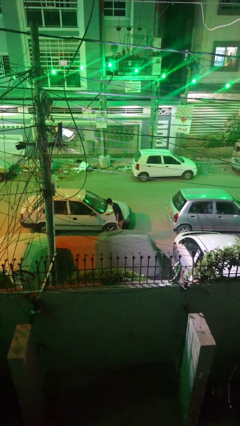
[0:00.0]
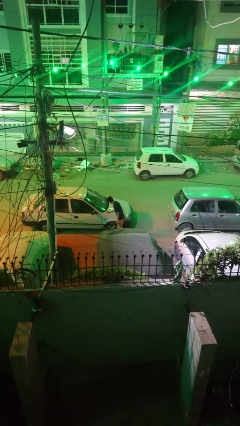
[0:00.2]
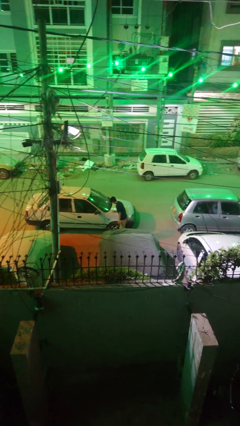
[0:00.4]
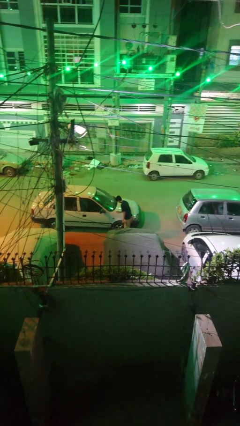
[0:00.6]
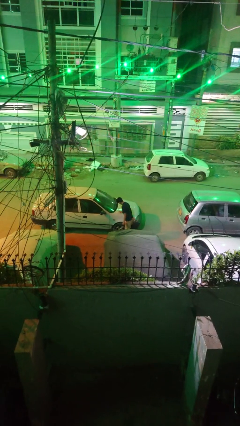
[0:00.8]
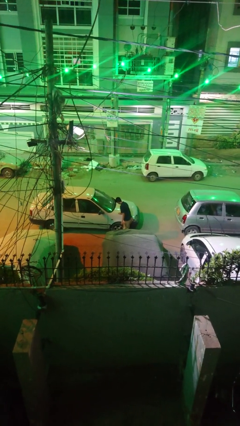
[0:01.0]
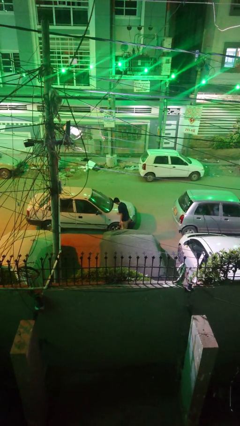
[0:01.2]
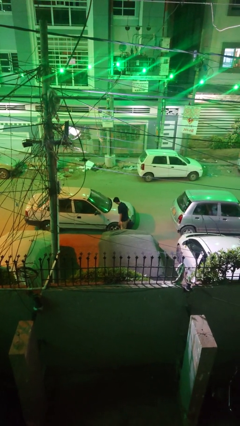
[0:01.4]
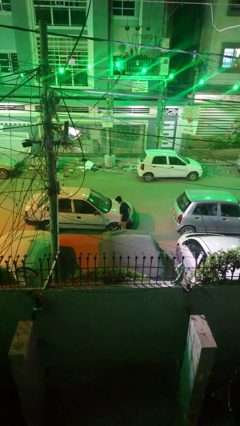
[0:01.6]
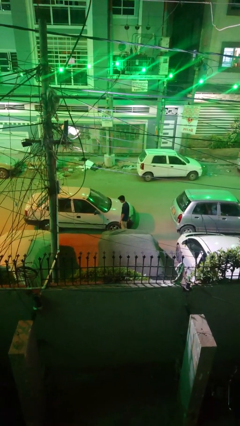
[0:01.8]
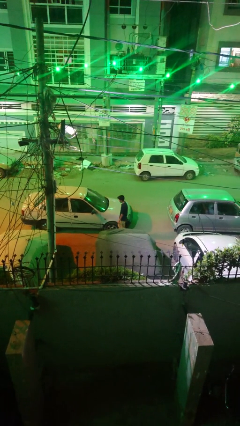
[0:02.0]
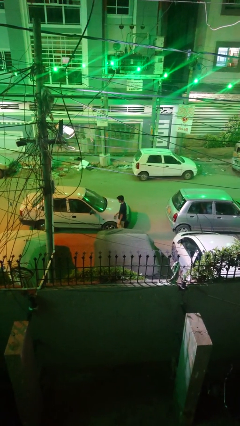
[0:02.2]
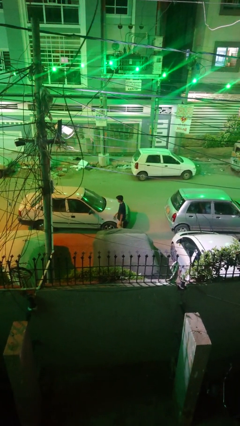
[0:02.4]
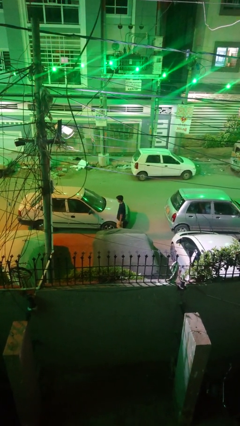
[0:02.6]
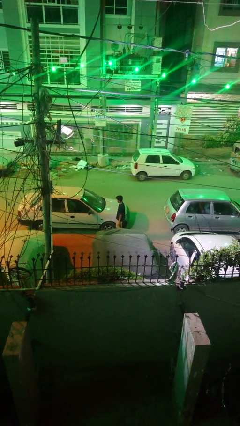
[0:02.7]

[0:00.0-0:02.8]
person polishes car with rag

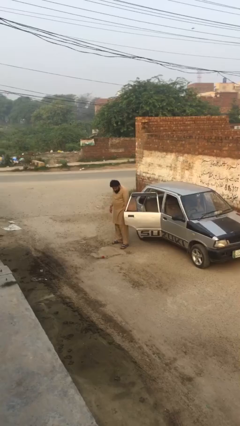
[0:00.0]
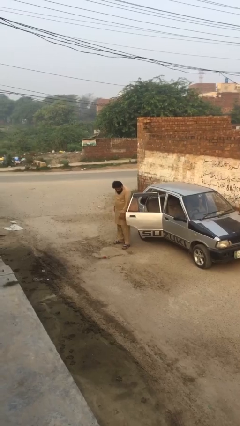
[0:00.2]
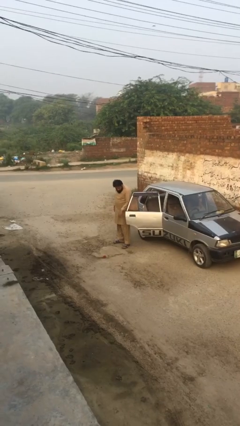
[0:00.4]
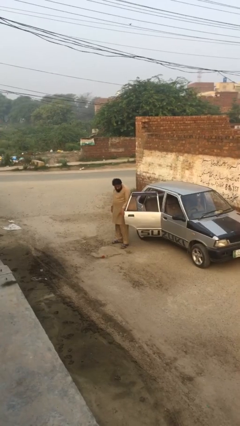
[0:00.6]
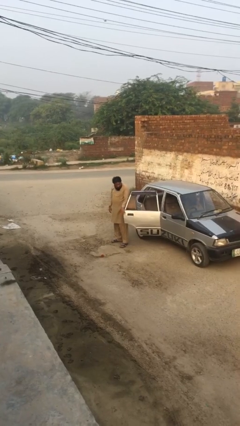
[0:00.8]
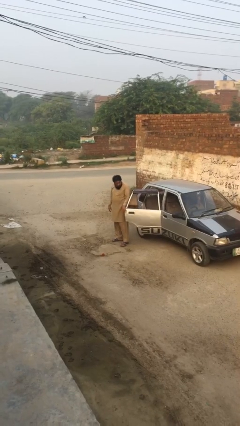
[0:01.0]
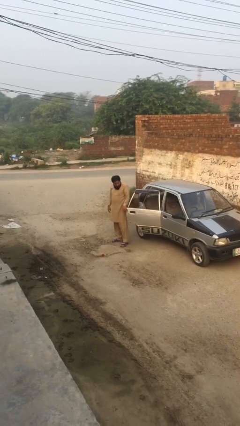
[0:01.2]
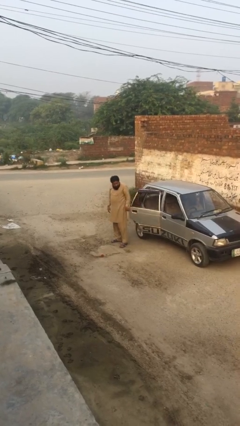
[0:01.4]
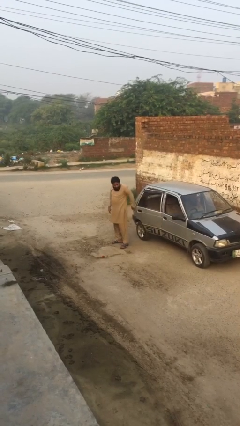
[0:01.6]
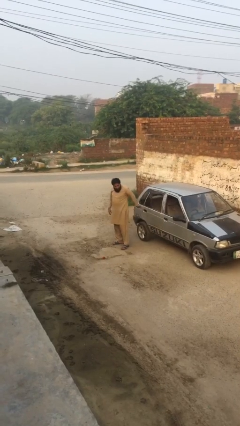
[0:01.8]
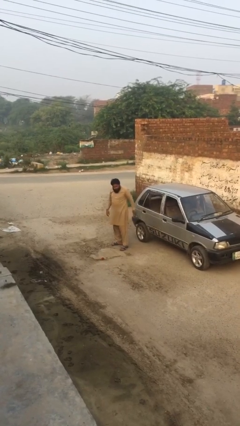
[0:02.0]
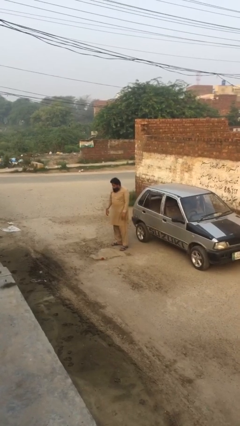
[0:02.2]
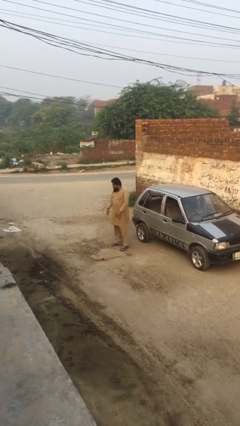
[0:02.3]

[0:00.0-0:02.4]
person closes car door

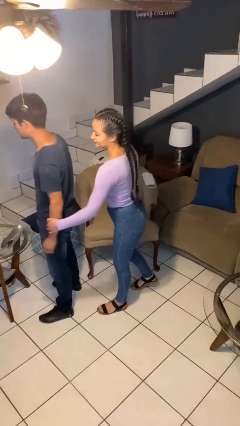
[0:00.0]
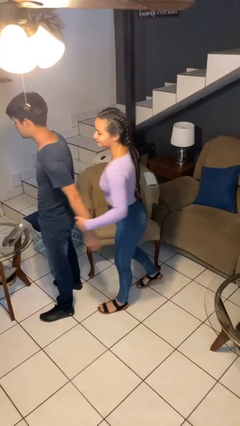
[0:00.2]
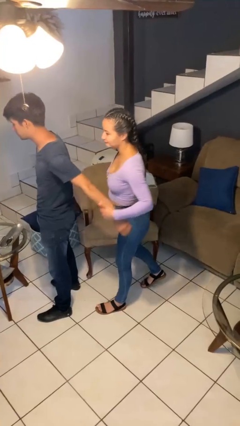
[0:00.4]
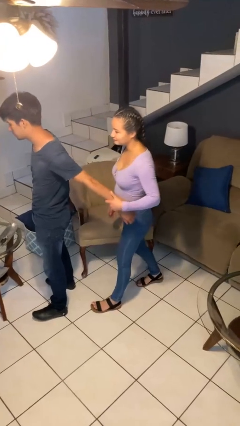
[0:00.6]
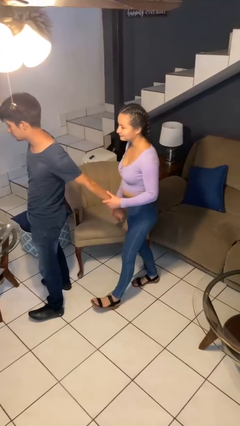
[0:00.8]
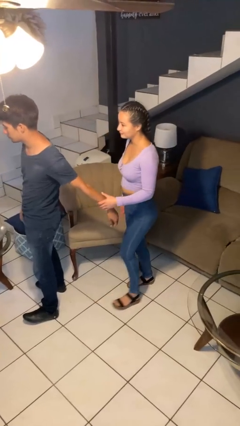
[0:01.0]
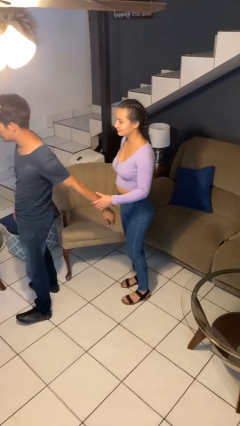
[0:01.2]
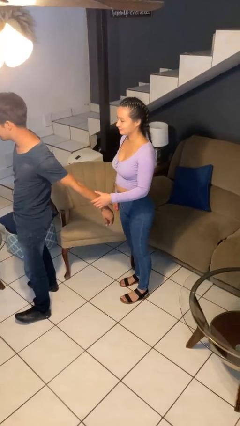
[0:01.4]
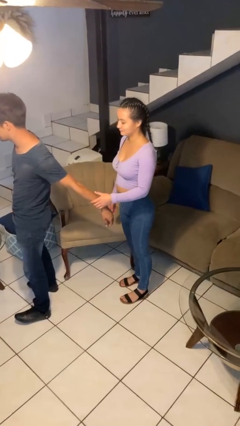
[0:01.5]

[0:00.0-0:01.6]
person grabs person by forearm

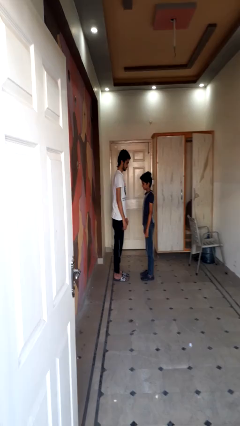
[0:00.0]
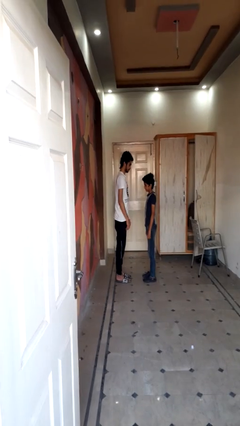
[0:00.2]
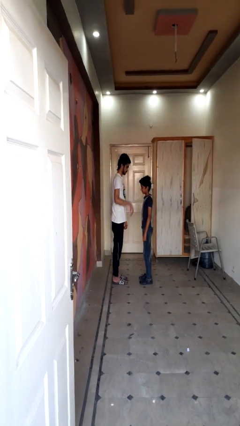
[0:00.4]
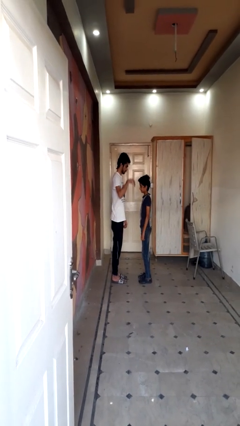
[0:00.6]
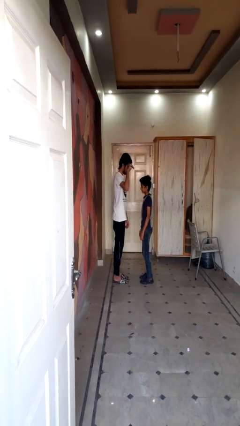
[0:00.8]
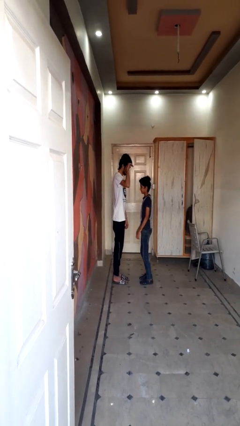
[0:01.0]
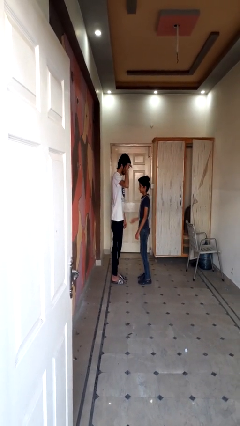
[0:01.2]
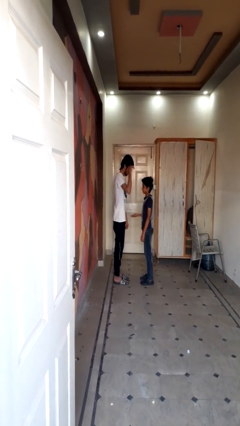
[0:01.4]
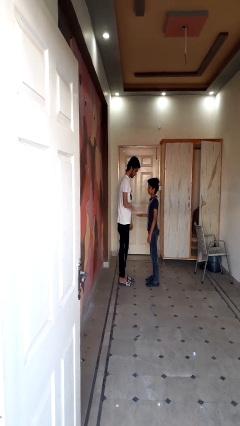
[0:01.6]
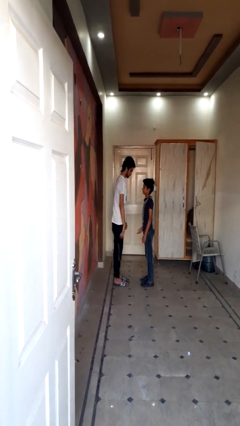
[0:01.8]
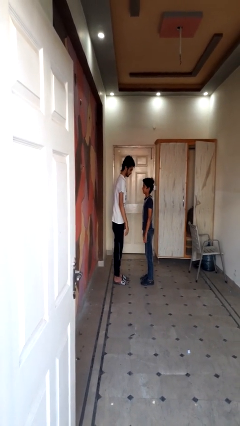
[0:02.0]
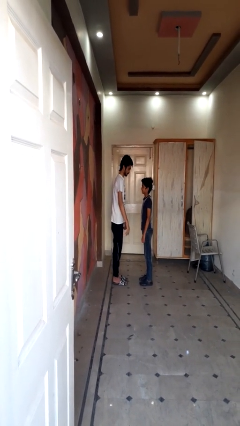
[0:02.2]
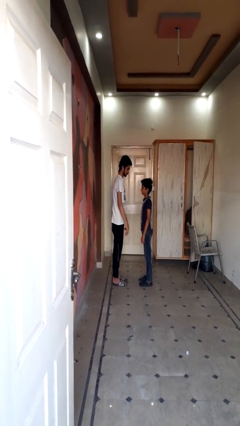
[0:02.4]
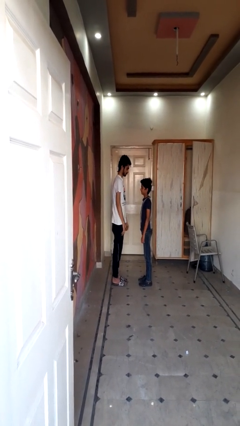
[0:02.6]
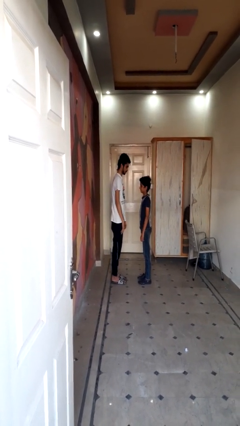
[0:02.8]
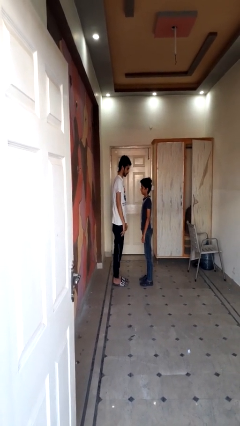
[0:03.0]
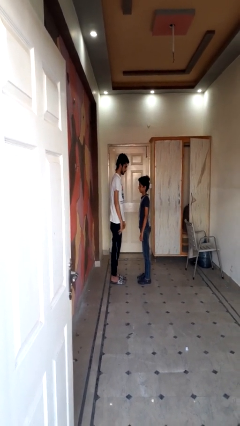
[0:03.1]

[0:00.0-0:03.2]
person highfives hand

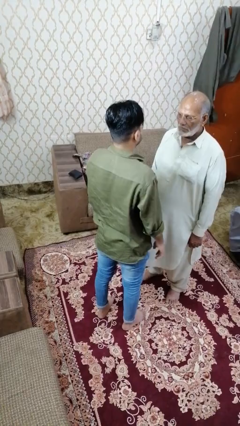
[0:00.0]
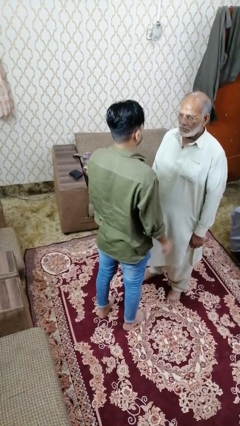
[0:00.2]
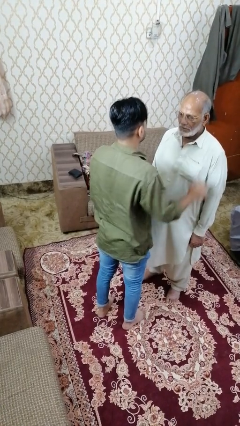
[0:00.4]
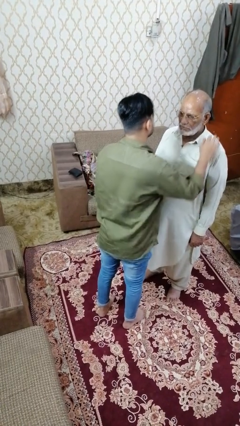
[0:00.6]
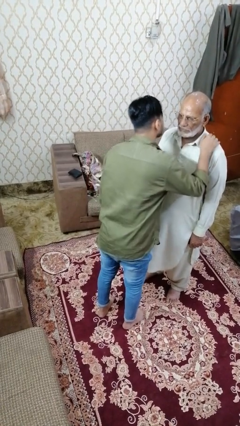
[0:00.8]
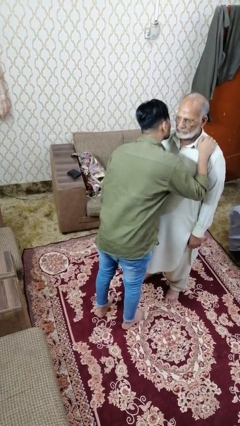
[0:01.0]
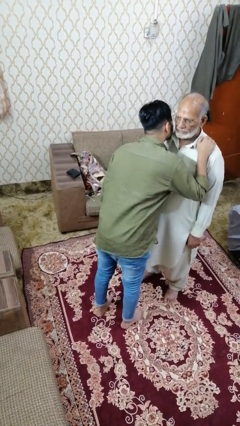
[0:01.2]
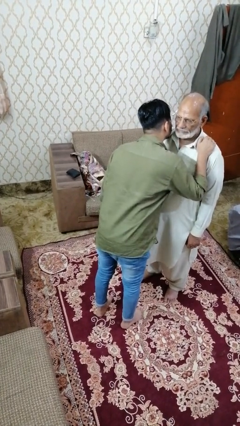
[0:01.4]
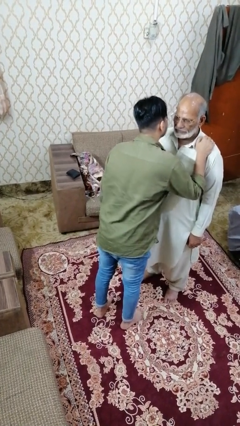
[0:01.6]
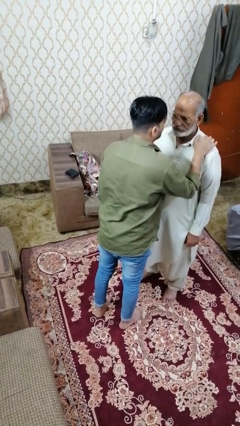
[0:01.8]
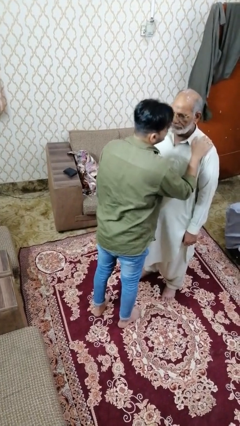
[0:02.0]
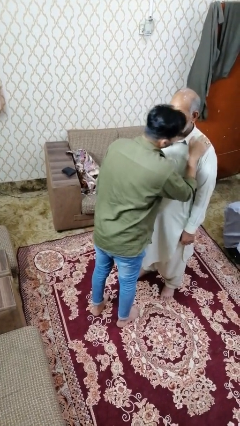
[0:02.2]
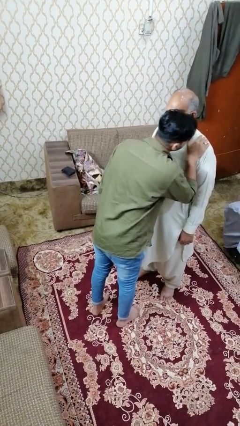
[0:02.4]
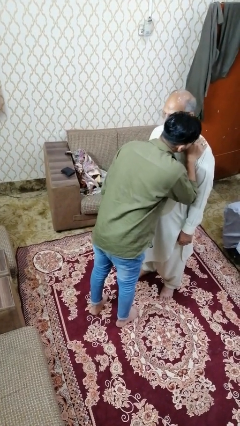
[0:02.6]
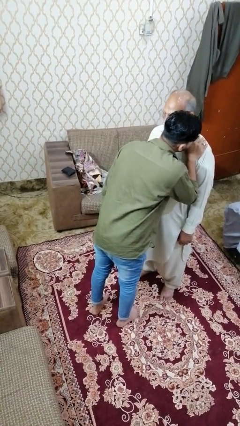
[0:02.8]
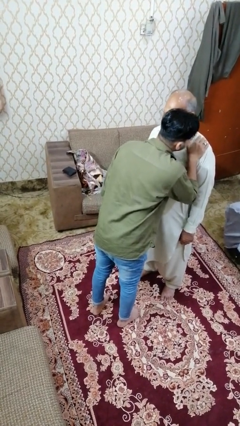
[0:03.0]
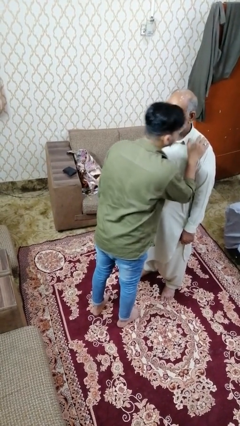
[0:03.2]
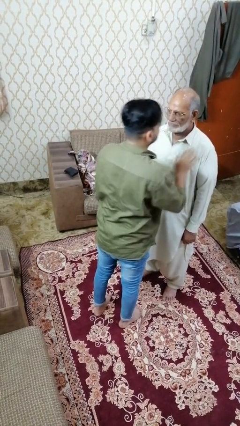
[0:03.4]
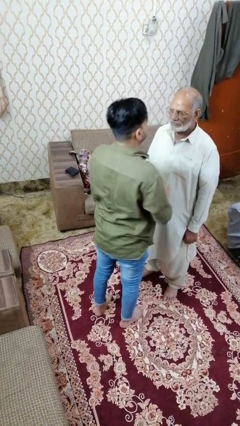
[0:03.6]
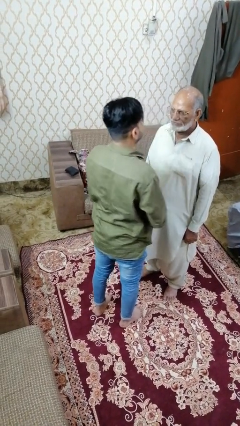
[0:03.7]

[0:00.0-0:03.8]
person kisses cheek of person

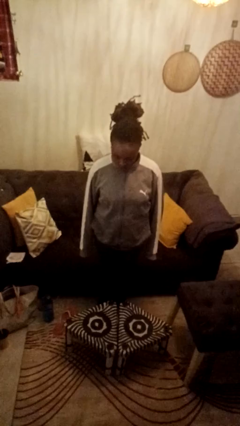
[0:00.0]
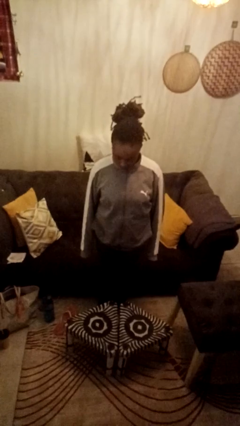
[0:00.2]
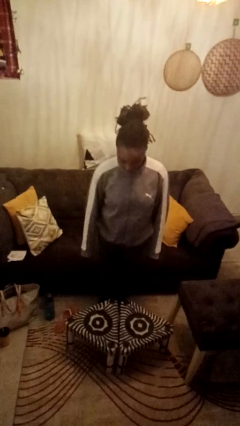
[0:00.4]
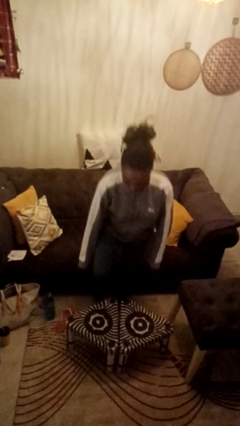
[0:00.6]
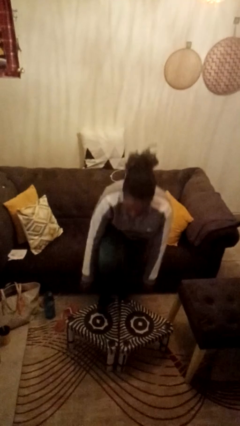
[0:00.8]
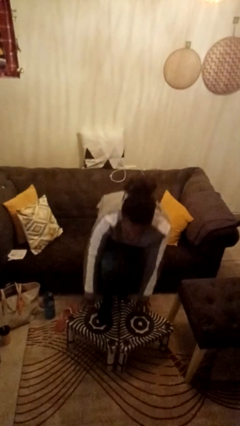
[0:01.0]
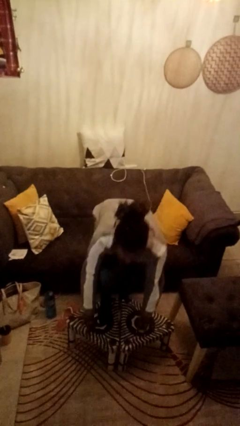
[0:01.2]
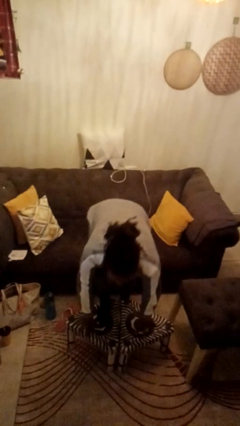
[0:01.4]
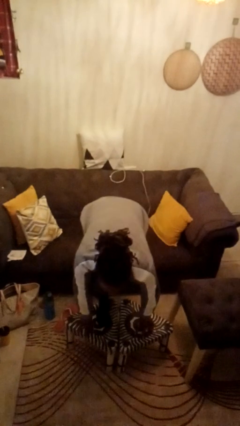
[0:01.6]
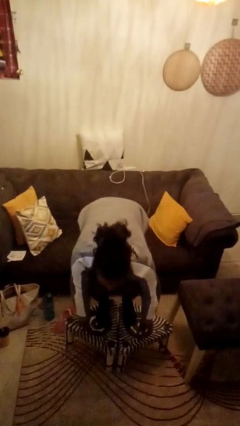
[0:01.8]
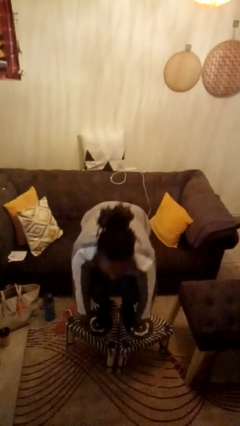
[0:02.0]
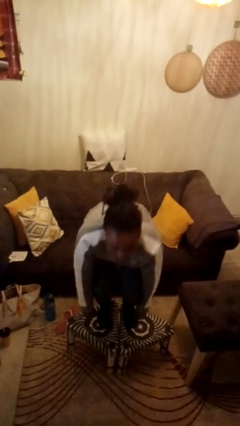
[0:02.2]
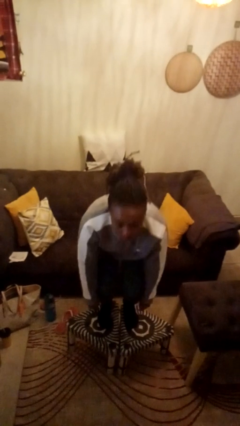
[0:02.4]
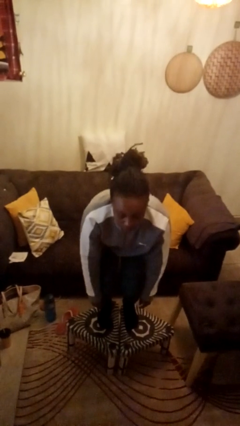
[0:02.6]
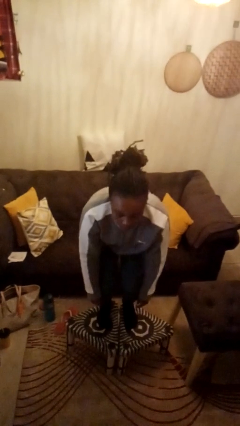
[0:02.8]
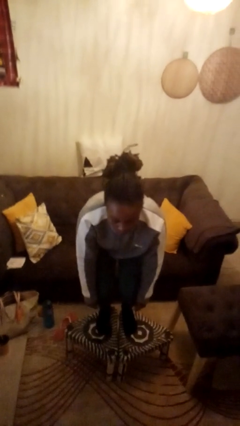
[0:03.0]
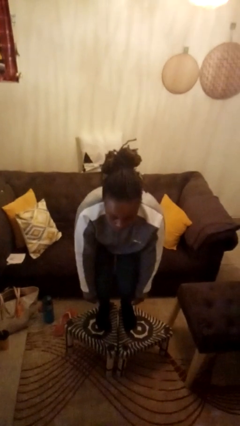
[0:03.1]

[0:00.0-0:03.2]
person climbs on table

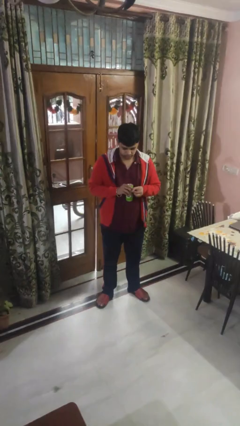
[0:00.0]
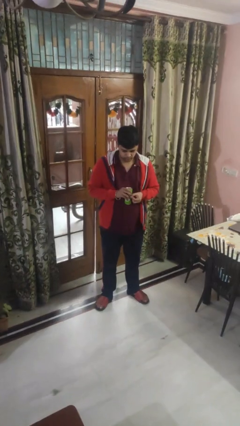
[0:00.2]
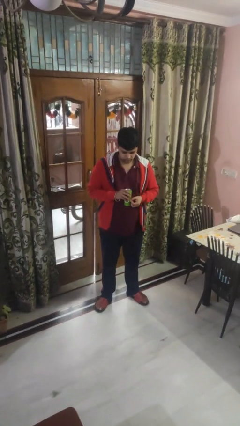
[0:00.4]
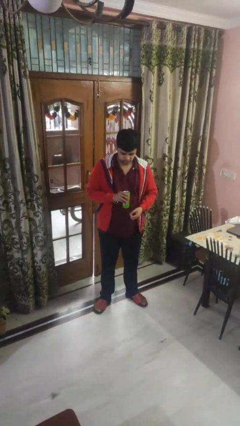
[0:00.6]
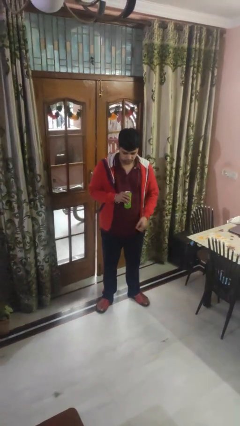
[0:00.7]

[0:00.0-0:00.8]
person opens beverage can
